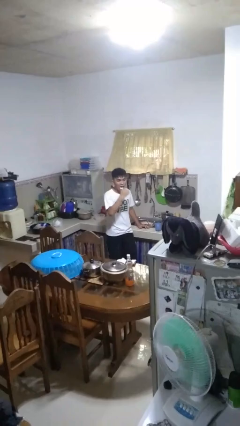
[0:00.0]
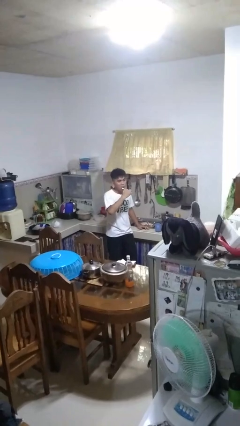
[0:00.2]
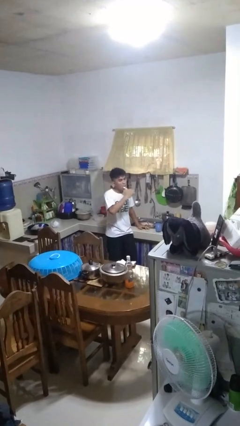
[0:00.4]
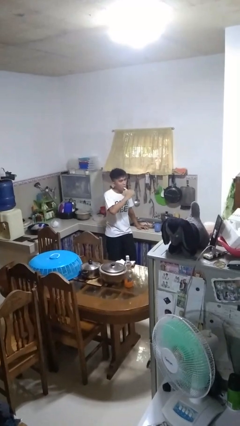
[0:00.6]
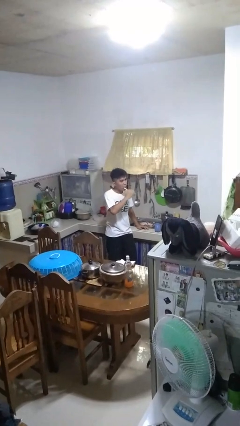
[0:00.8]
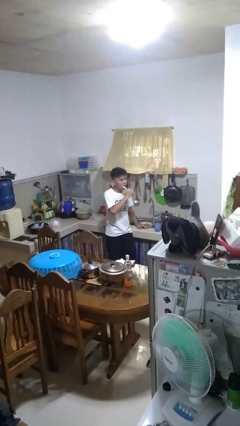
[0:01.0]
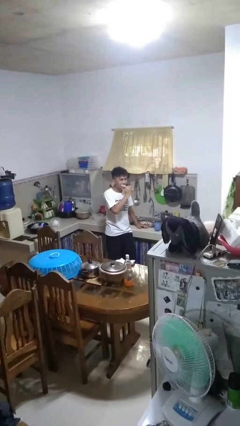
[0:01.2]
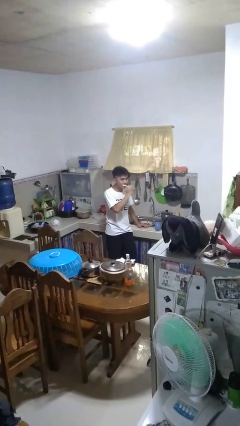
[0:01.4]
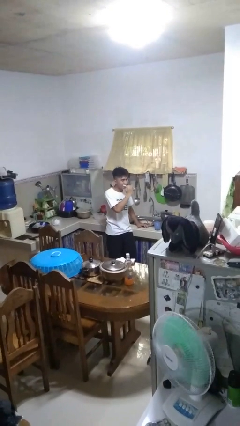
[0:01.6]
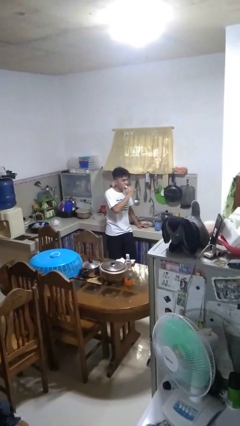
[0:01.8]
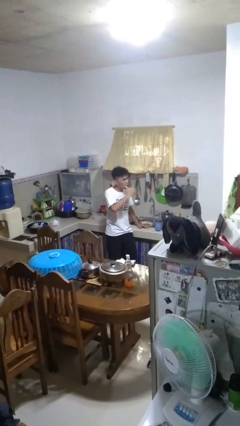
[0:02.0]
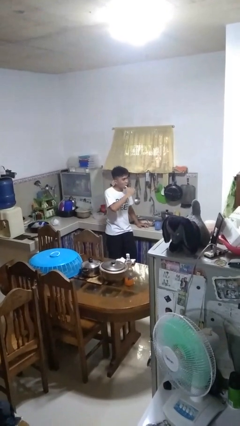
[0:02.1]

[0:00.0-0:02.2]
person brushes teeth

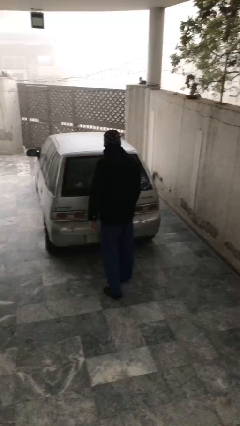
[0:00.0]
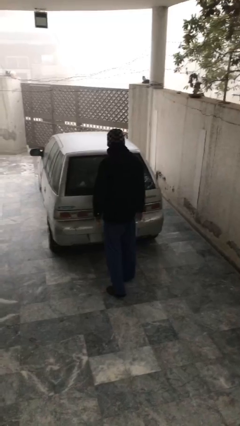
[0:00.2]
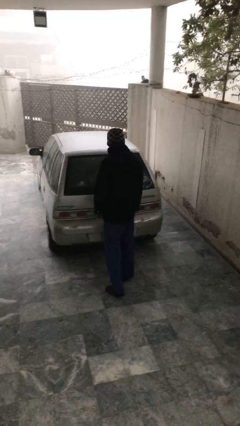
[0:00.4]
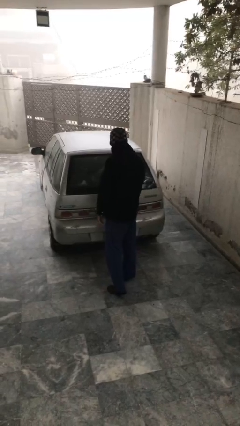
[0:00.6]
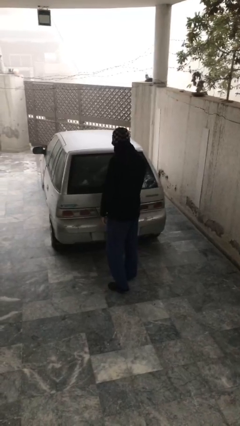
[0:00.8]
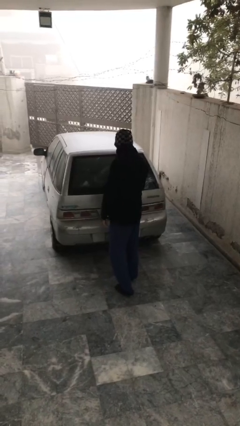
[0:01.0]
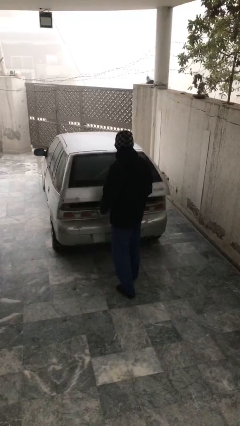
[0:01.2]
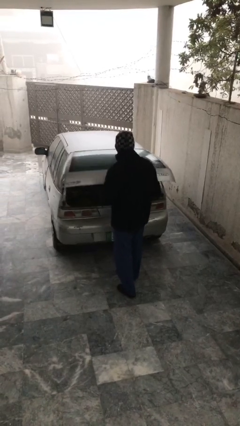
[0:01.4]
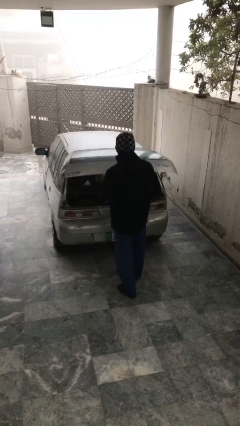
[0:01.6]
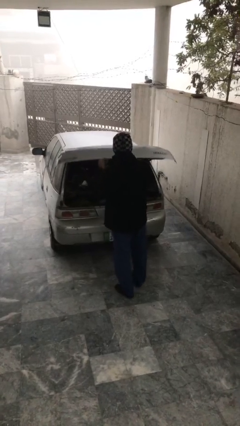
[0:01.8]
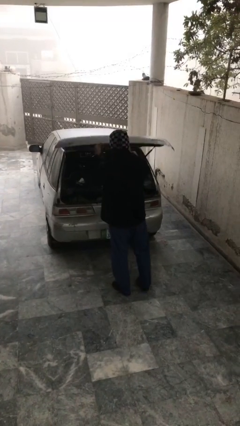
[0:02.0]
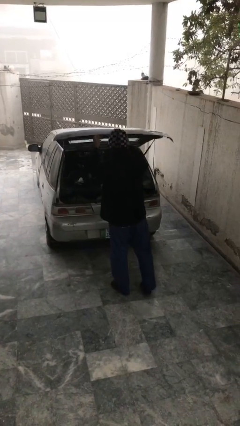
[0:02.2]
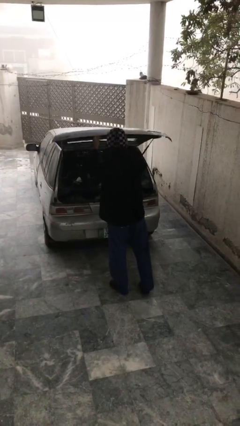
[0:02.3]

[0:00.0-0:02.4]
person opens car trunk

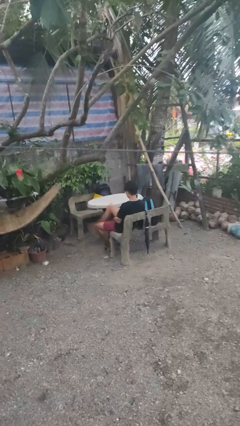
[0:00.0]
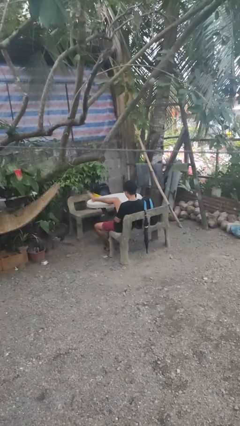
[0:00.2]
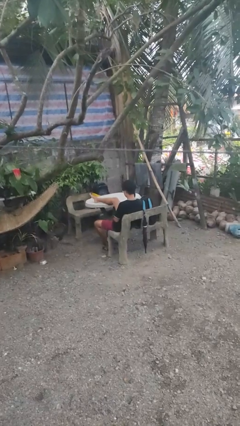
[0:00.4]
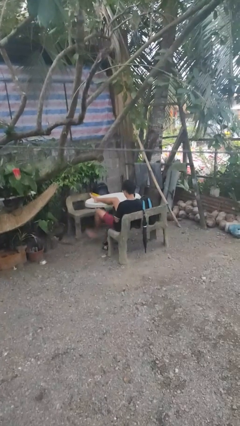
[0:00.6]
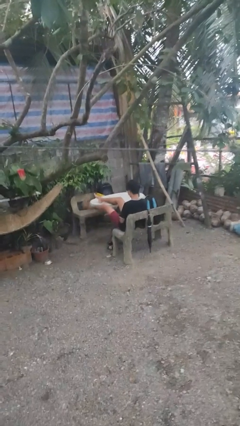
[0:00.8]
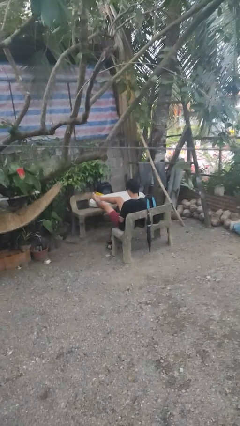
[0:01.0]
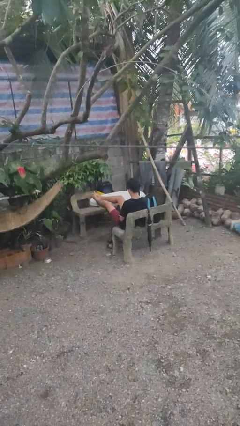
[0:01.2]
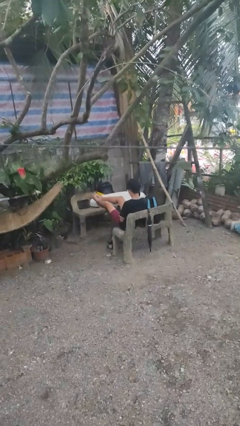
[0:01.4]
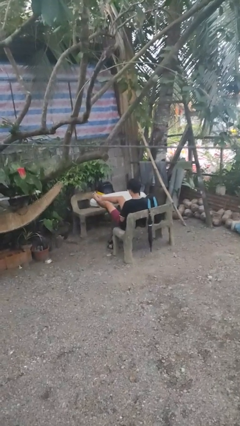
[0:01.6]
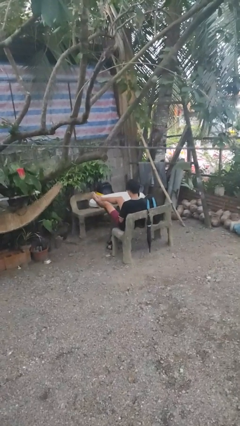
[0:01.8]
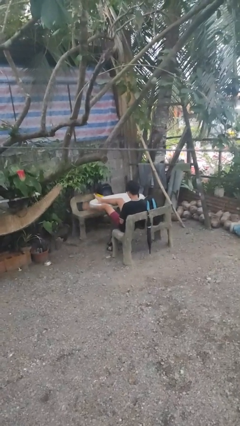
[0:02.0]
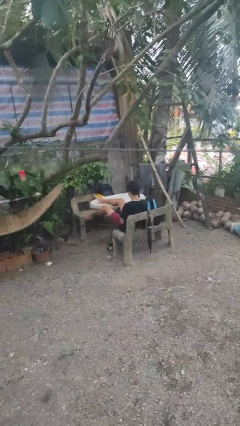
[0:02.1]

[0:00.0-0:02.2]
person puts feet up

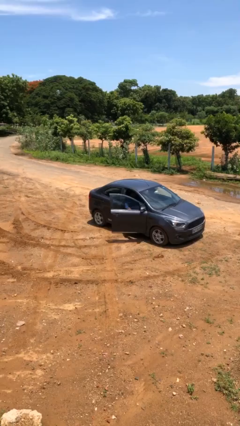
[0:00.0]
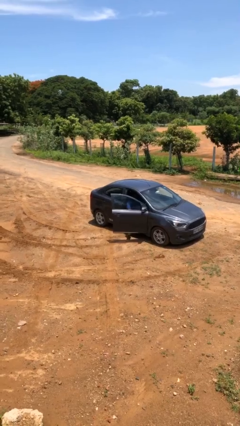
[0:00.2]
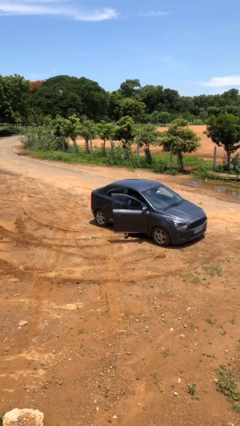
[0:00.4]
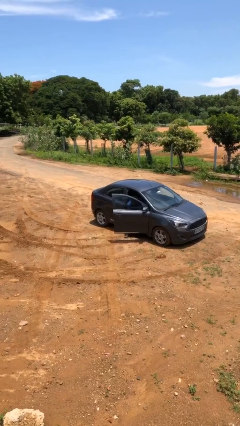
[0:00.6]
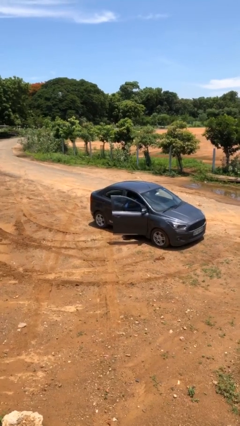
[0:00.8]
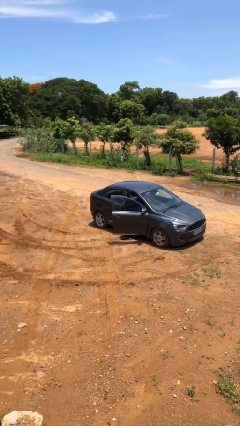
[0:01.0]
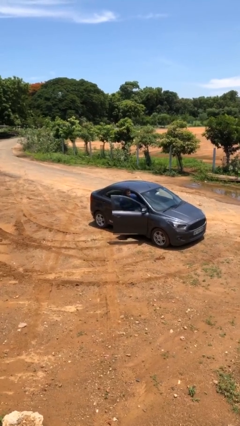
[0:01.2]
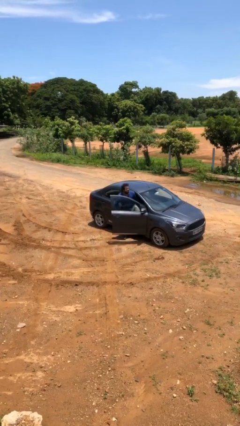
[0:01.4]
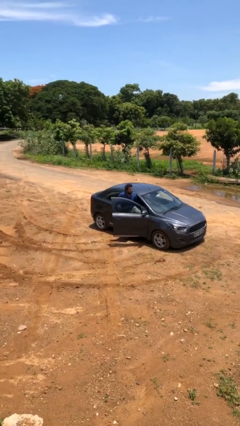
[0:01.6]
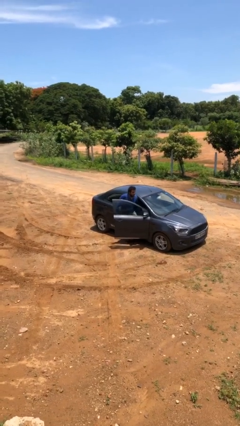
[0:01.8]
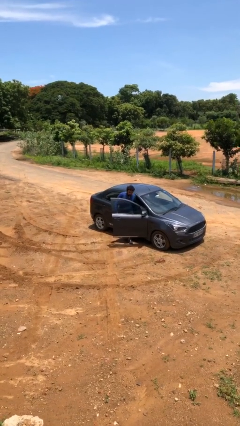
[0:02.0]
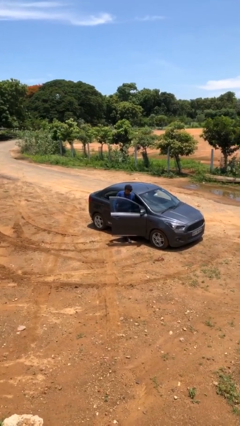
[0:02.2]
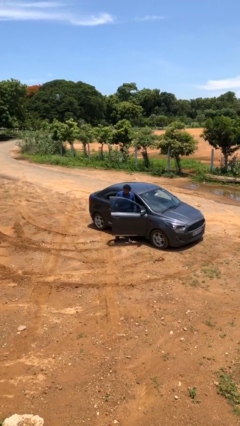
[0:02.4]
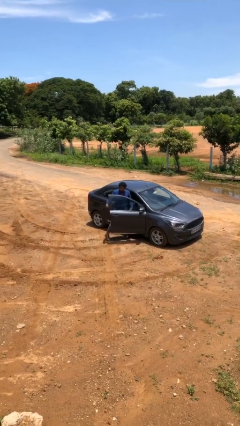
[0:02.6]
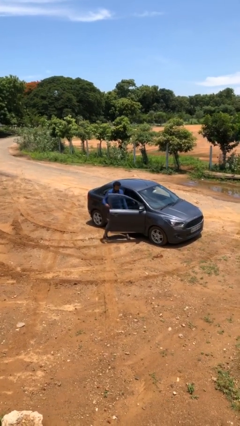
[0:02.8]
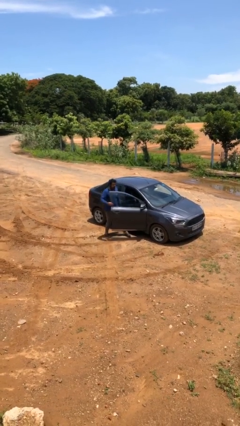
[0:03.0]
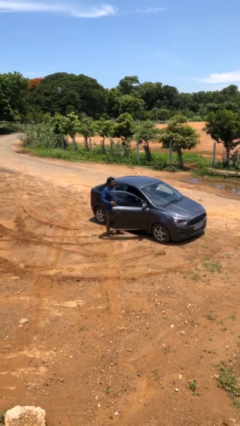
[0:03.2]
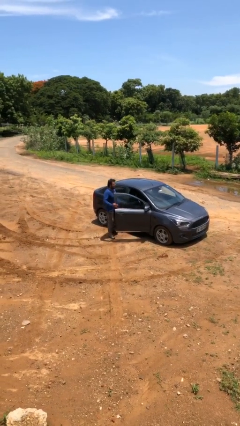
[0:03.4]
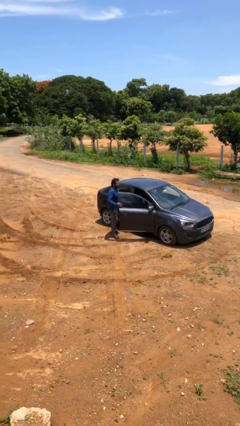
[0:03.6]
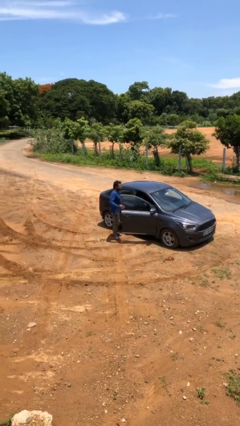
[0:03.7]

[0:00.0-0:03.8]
person exits car

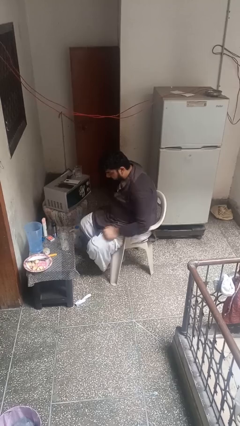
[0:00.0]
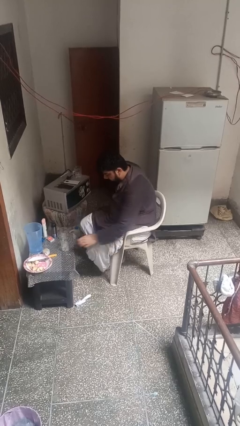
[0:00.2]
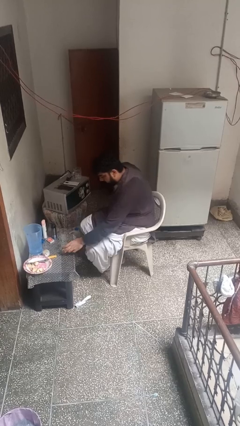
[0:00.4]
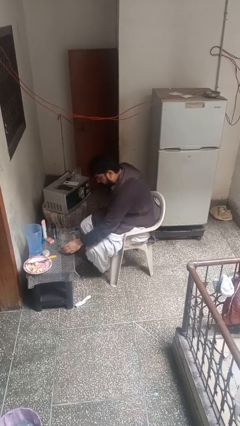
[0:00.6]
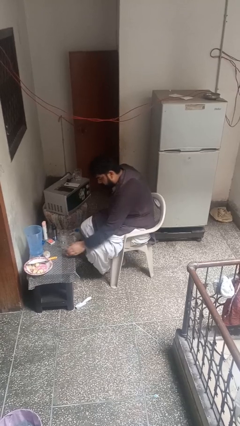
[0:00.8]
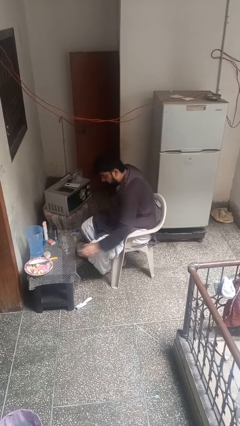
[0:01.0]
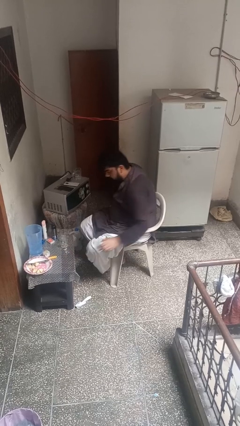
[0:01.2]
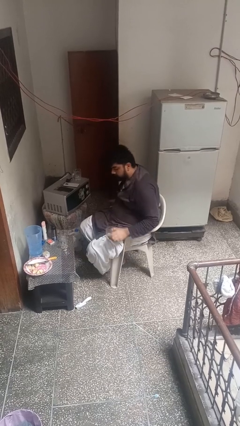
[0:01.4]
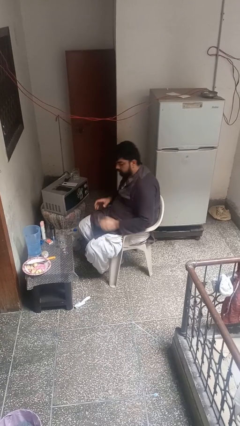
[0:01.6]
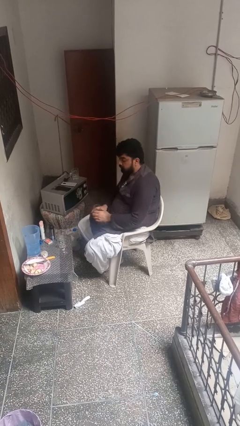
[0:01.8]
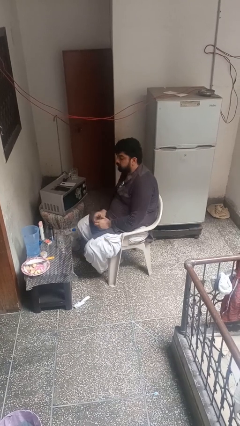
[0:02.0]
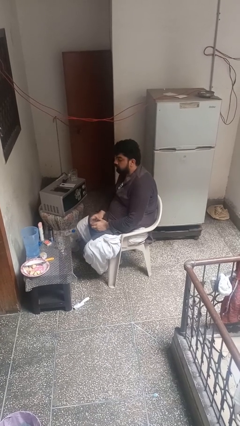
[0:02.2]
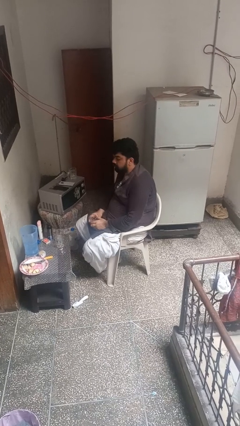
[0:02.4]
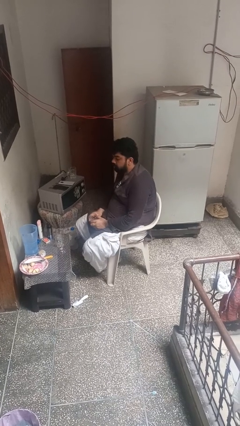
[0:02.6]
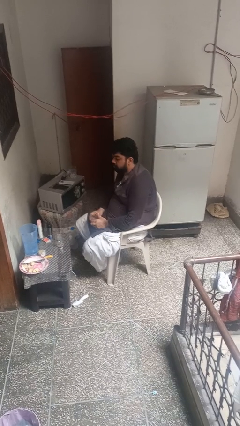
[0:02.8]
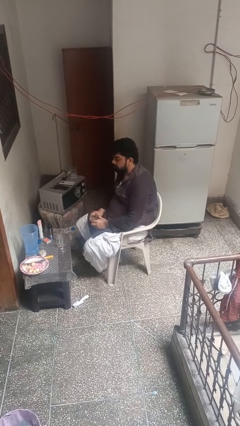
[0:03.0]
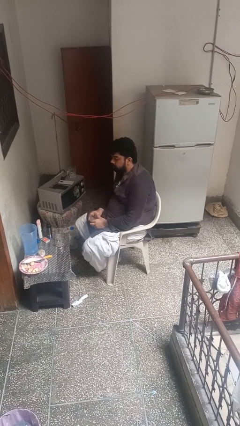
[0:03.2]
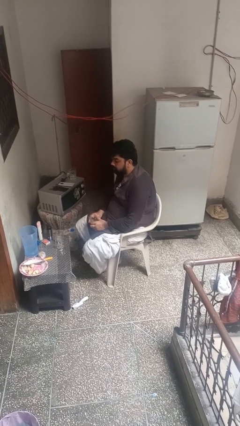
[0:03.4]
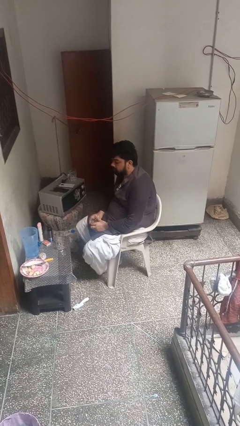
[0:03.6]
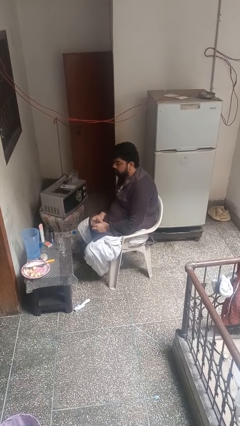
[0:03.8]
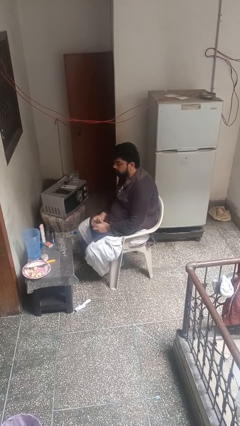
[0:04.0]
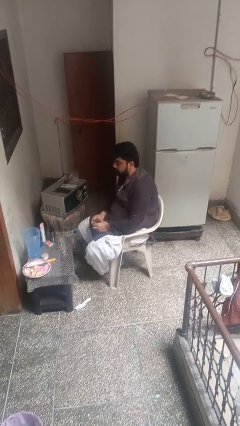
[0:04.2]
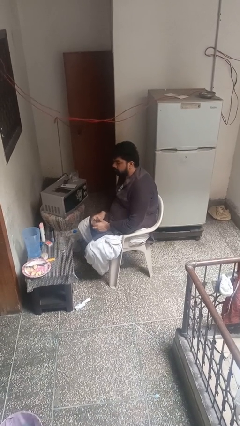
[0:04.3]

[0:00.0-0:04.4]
person picks up object from table

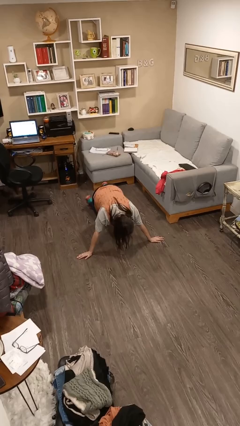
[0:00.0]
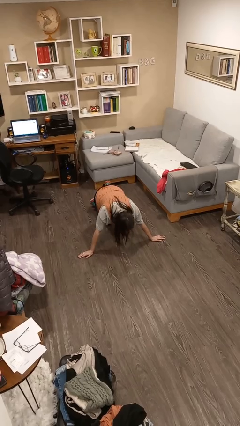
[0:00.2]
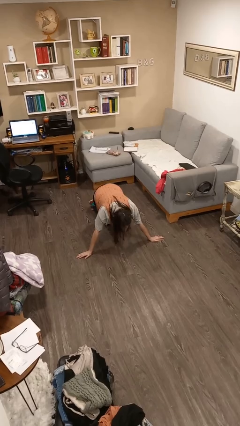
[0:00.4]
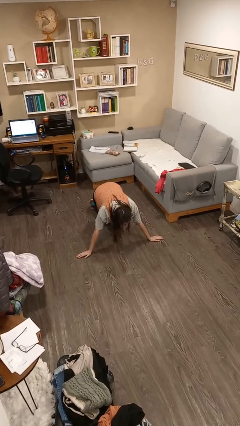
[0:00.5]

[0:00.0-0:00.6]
person exercises with pushup

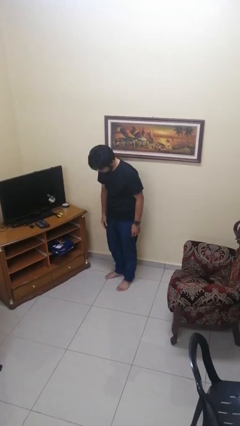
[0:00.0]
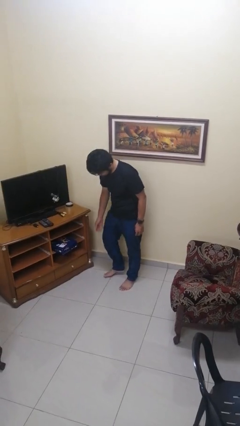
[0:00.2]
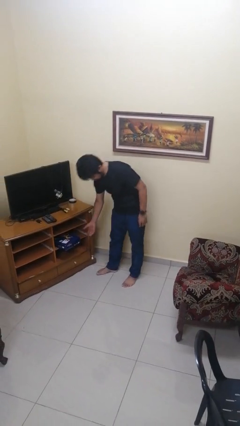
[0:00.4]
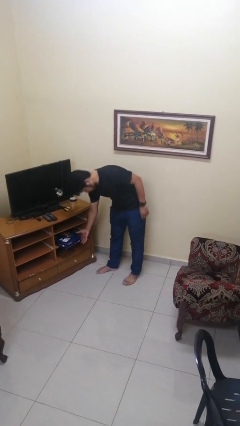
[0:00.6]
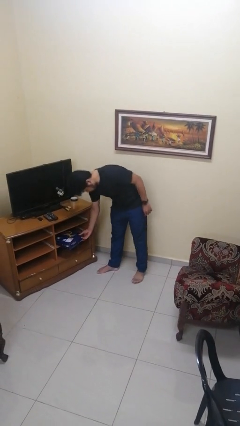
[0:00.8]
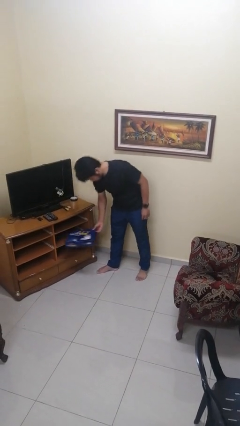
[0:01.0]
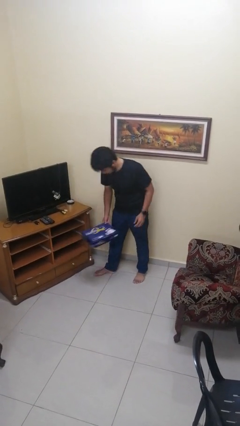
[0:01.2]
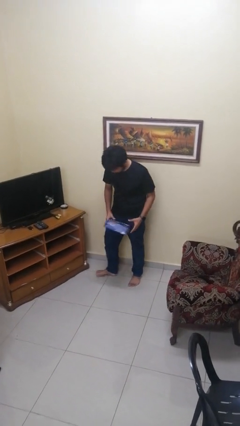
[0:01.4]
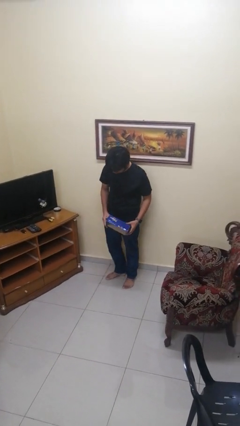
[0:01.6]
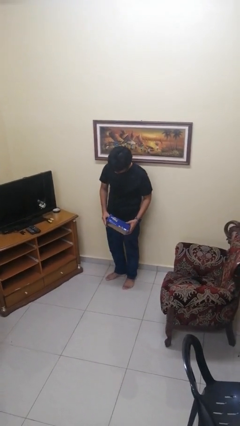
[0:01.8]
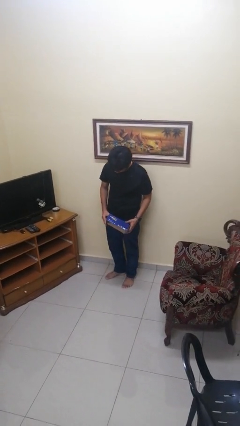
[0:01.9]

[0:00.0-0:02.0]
person picks up object from cabinet
